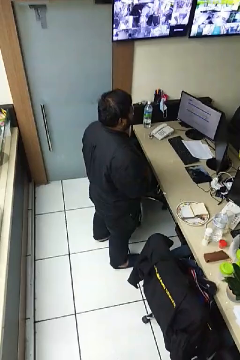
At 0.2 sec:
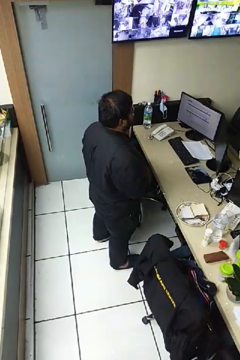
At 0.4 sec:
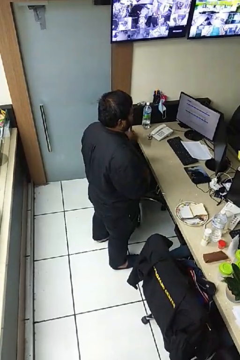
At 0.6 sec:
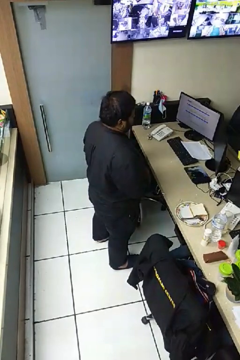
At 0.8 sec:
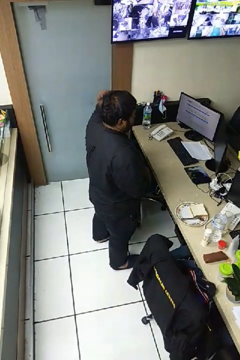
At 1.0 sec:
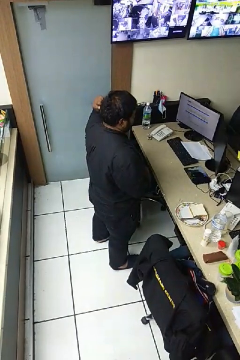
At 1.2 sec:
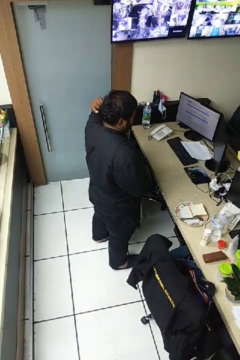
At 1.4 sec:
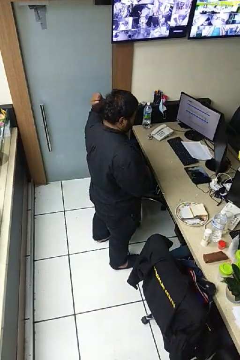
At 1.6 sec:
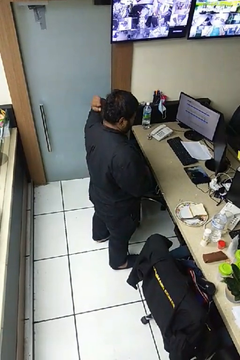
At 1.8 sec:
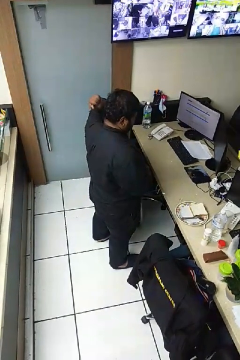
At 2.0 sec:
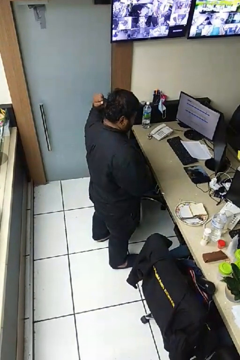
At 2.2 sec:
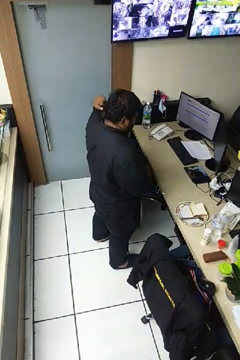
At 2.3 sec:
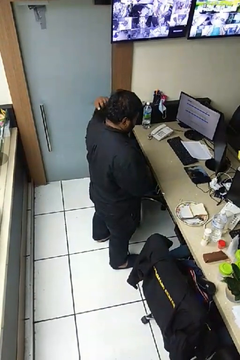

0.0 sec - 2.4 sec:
person brushes hair

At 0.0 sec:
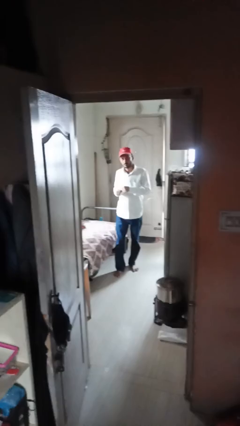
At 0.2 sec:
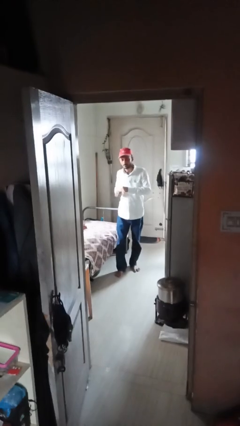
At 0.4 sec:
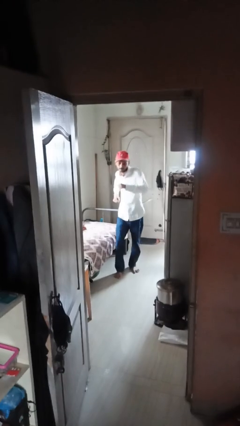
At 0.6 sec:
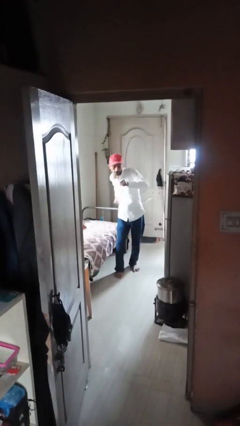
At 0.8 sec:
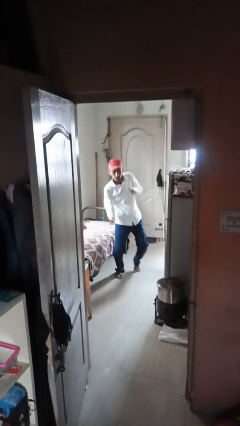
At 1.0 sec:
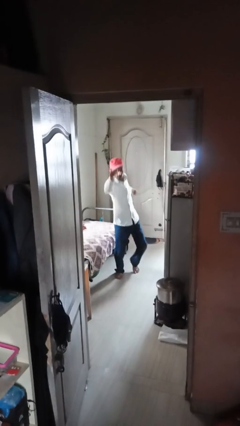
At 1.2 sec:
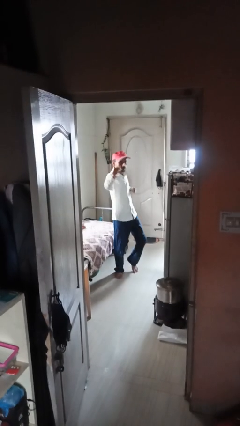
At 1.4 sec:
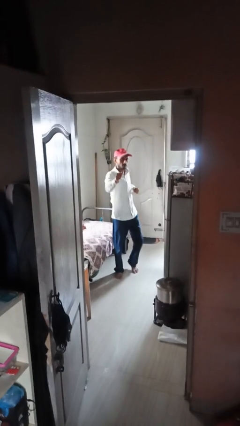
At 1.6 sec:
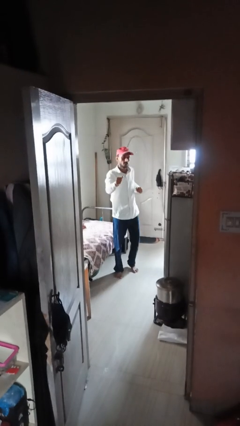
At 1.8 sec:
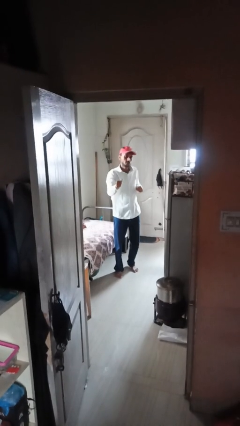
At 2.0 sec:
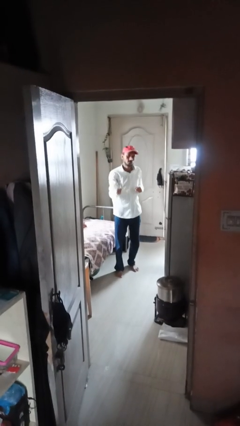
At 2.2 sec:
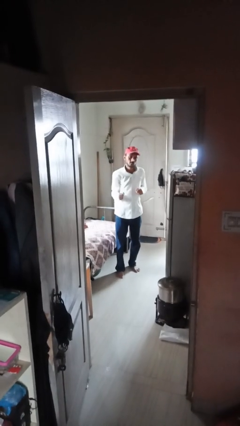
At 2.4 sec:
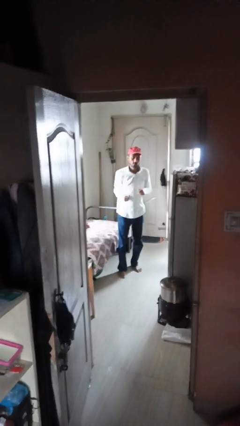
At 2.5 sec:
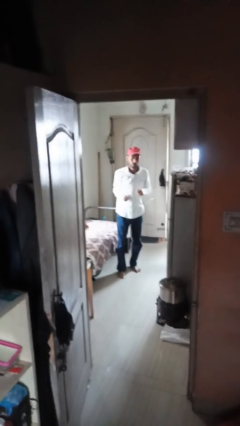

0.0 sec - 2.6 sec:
person punches

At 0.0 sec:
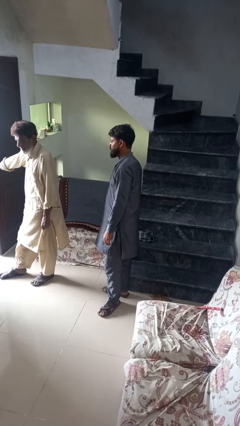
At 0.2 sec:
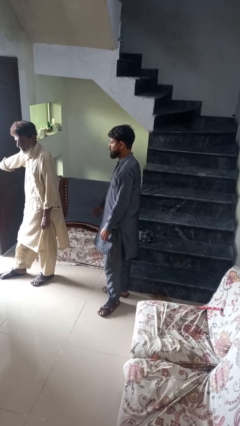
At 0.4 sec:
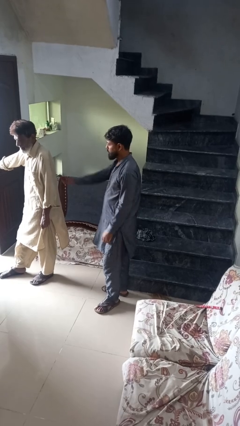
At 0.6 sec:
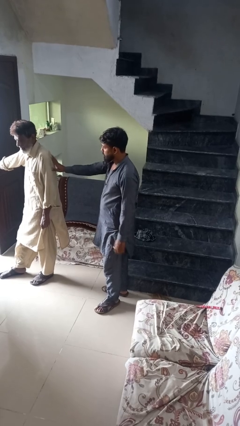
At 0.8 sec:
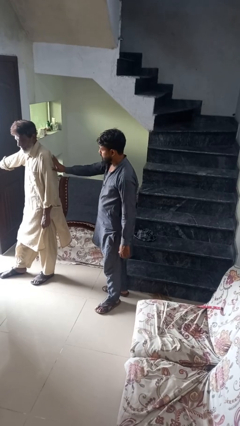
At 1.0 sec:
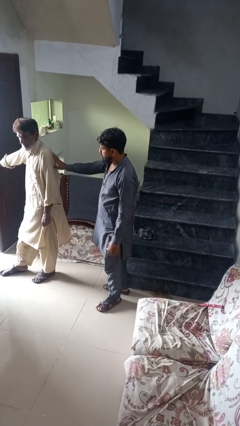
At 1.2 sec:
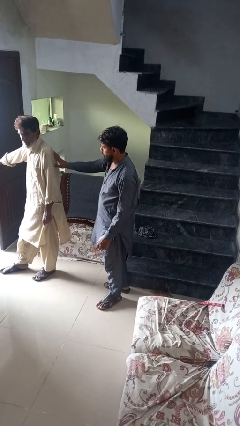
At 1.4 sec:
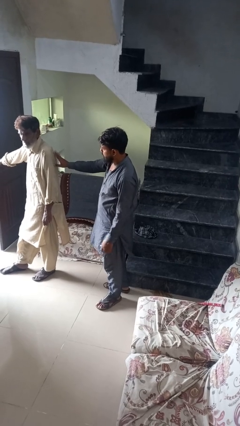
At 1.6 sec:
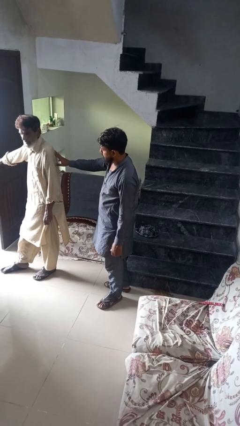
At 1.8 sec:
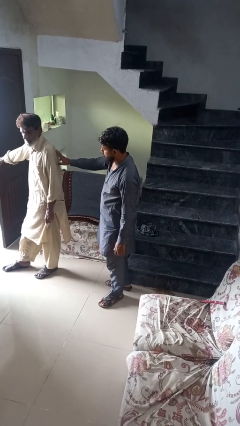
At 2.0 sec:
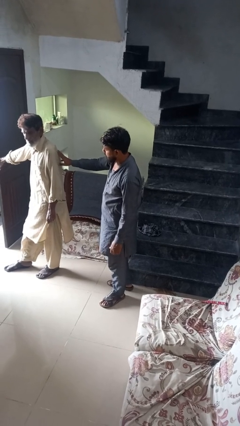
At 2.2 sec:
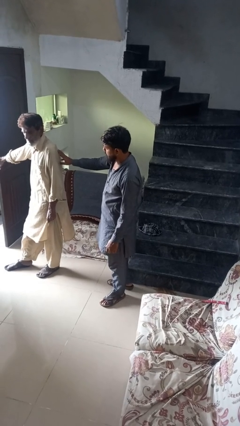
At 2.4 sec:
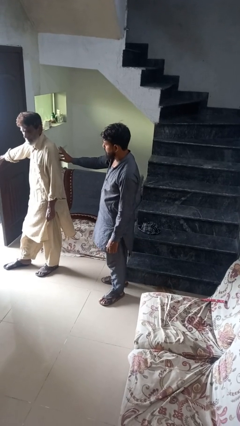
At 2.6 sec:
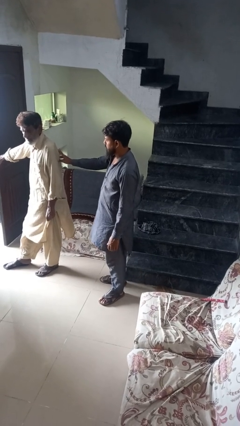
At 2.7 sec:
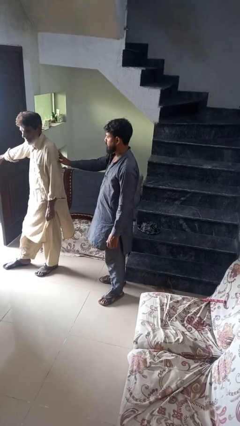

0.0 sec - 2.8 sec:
person touches back of person

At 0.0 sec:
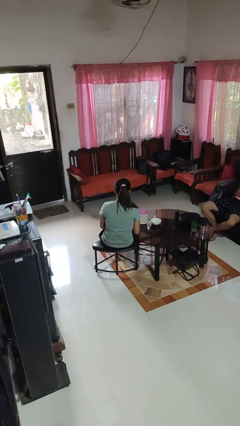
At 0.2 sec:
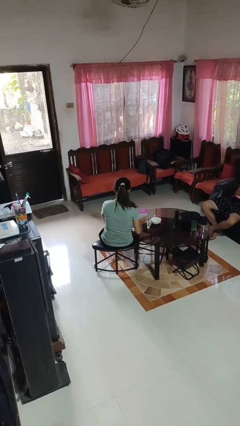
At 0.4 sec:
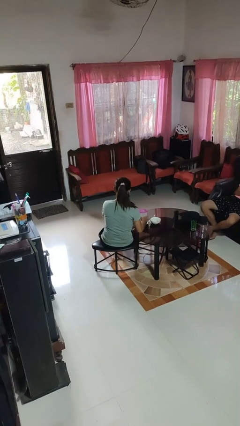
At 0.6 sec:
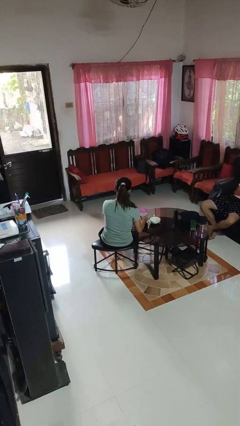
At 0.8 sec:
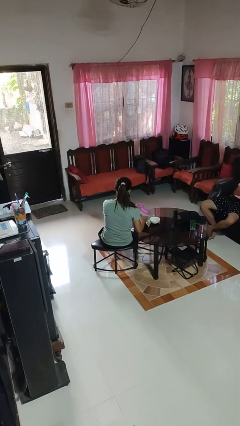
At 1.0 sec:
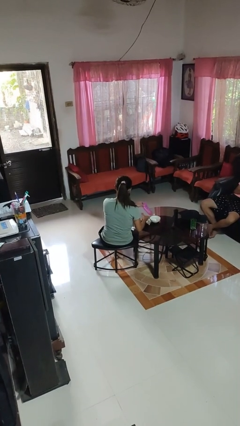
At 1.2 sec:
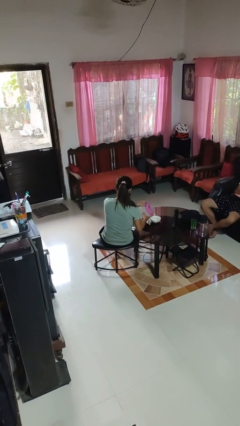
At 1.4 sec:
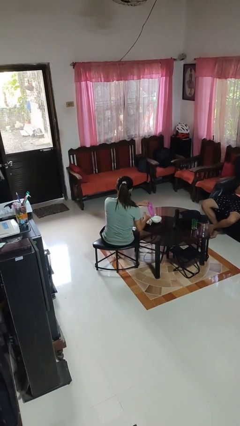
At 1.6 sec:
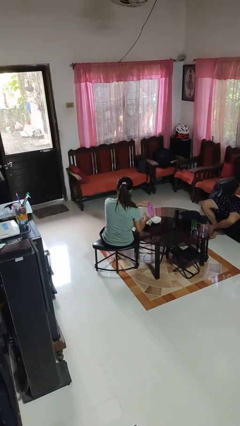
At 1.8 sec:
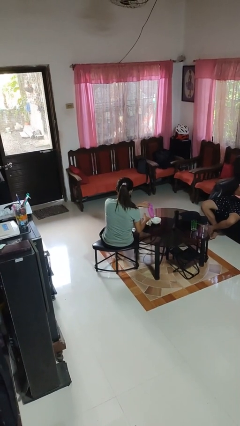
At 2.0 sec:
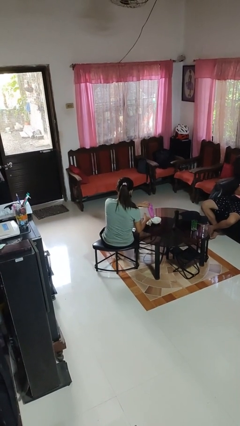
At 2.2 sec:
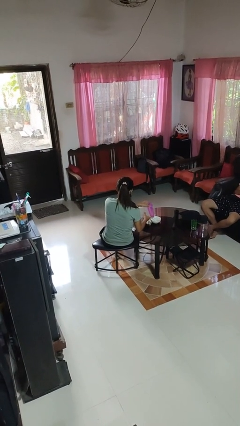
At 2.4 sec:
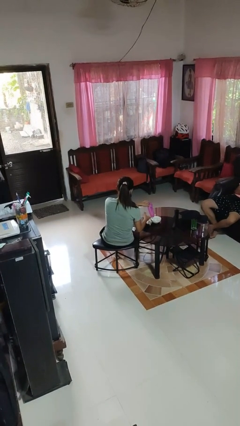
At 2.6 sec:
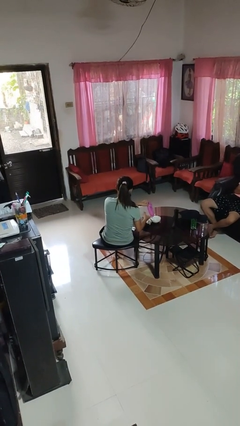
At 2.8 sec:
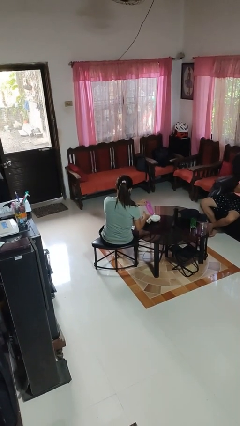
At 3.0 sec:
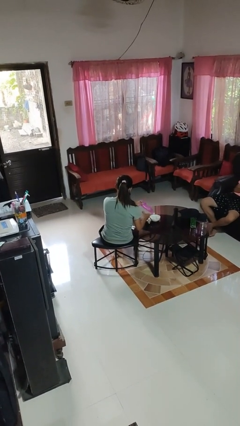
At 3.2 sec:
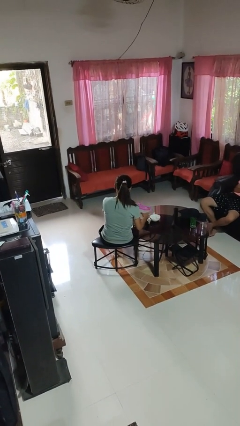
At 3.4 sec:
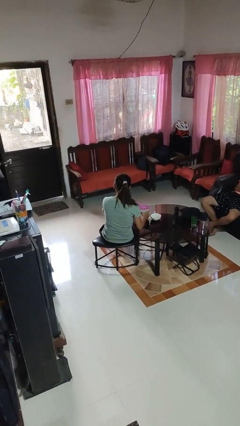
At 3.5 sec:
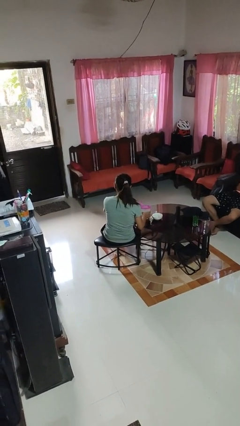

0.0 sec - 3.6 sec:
person pours into bowl

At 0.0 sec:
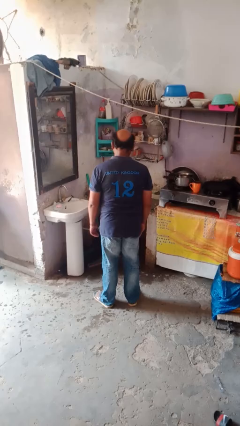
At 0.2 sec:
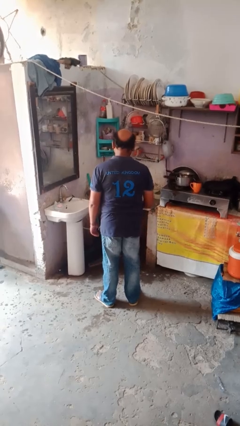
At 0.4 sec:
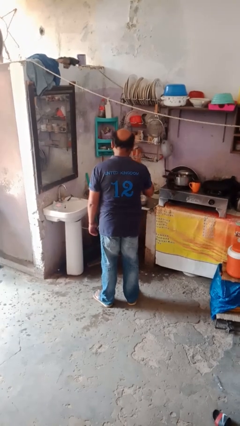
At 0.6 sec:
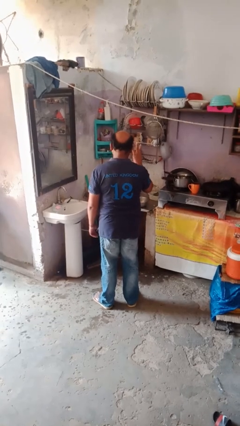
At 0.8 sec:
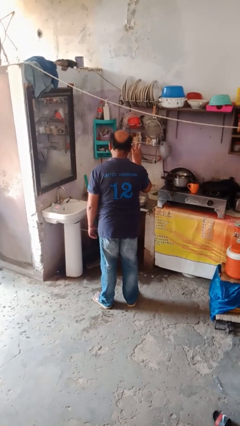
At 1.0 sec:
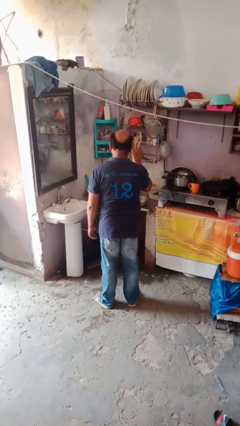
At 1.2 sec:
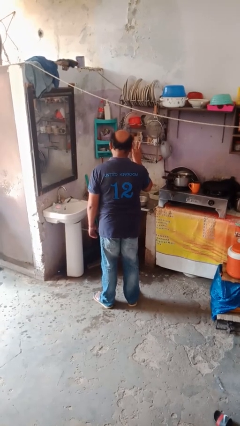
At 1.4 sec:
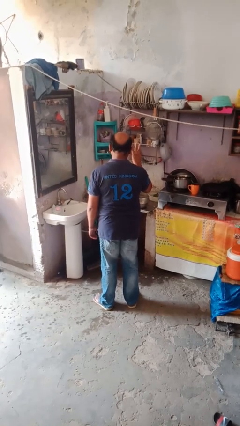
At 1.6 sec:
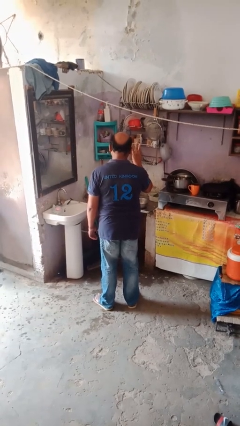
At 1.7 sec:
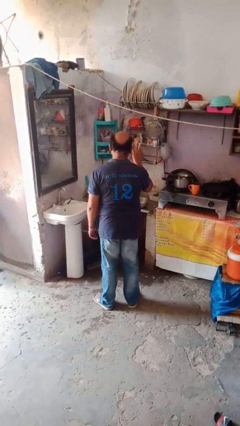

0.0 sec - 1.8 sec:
person gestures number three

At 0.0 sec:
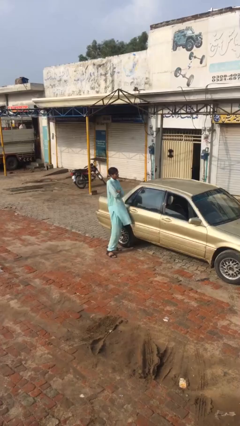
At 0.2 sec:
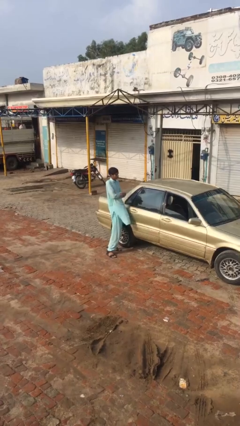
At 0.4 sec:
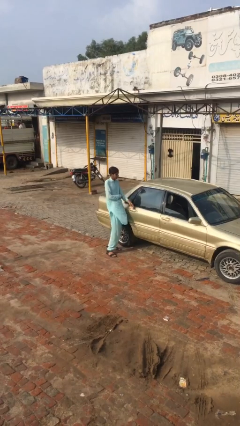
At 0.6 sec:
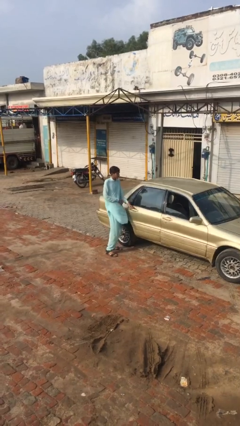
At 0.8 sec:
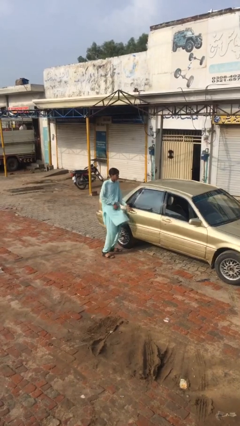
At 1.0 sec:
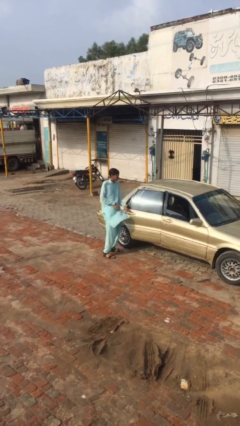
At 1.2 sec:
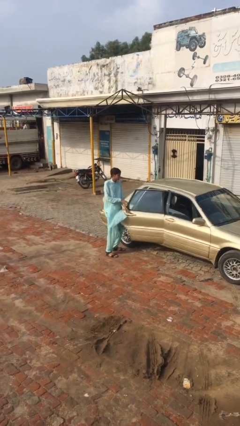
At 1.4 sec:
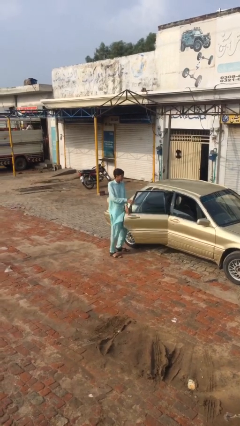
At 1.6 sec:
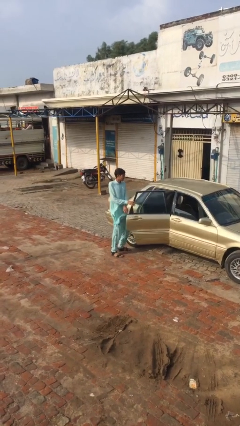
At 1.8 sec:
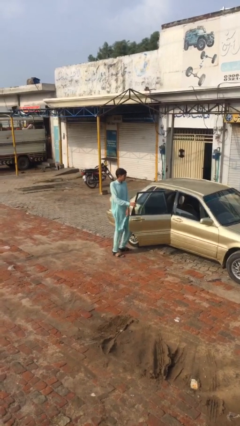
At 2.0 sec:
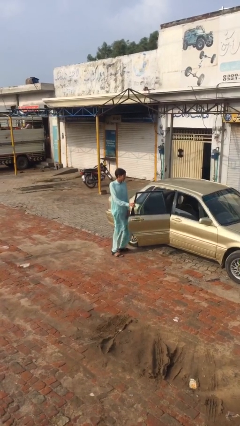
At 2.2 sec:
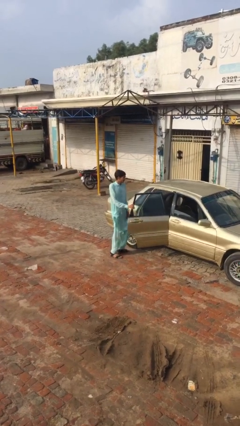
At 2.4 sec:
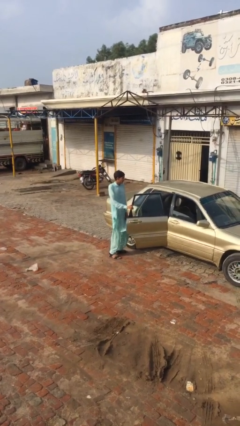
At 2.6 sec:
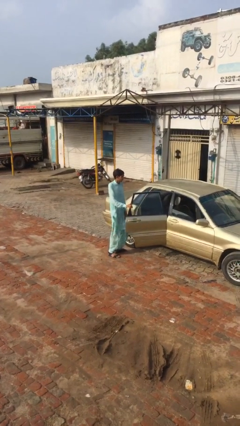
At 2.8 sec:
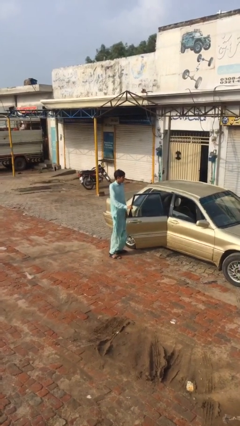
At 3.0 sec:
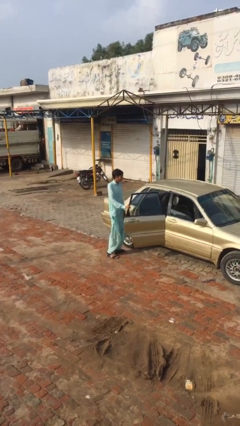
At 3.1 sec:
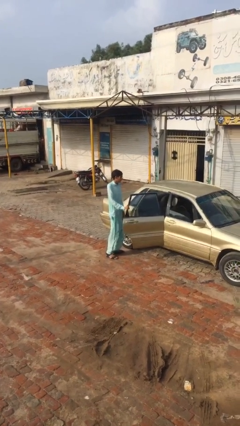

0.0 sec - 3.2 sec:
person opens car door

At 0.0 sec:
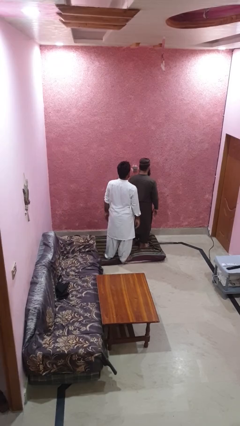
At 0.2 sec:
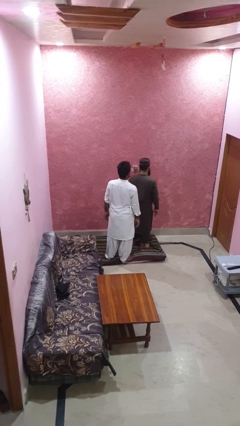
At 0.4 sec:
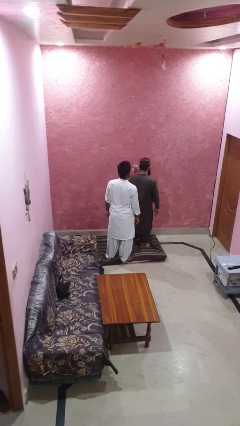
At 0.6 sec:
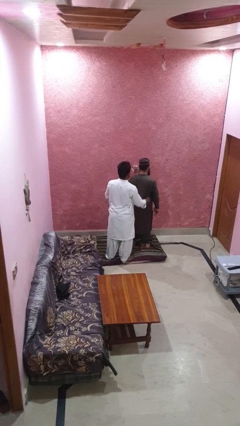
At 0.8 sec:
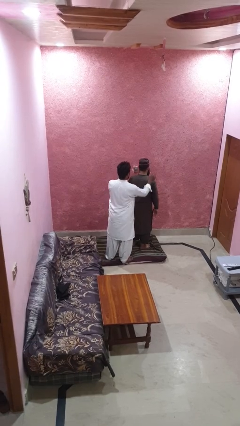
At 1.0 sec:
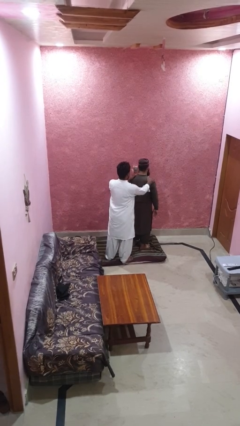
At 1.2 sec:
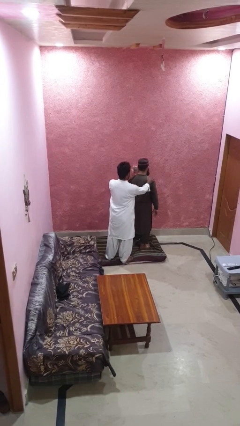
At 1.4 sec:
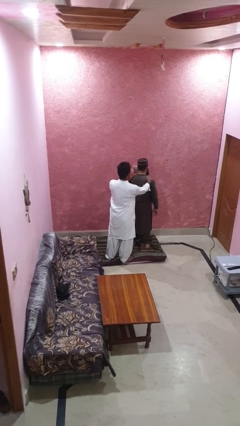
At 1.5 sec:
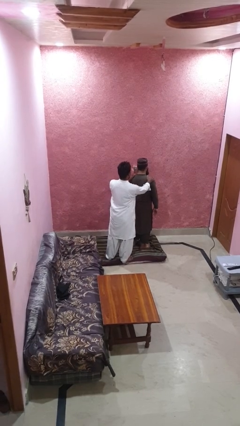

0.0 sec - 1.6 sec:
person grabs person by shoulder
